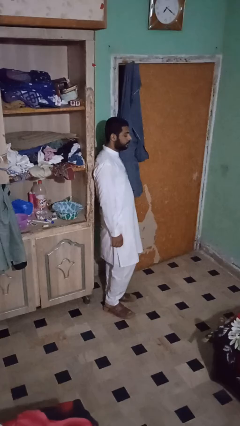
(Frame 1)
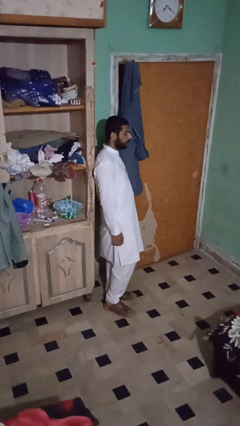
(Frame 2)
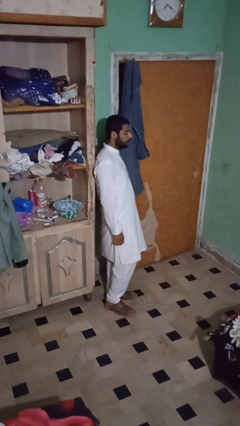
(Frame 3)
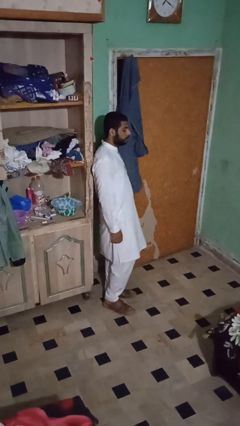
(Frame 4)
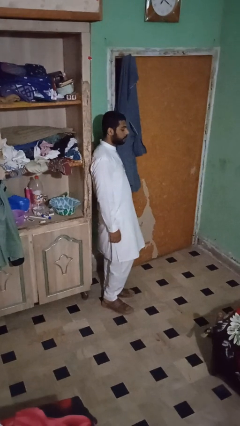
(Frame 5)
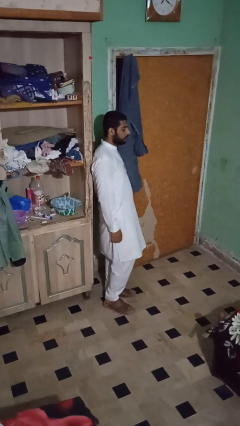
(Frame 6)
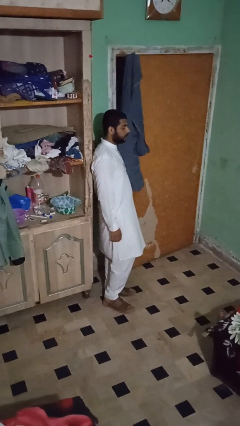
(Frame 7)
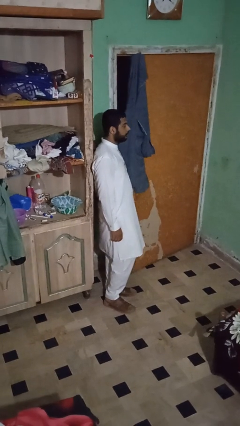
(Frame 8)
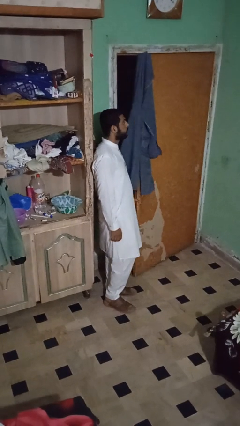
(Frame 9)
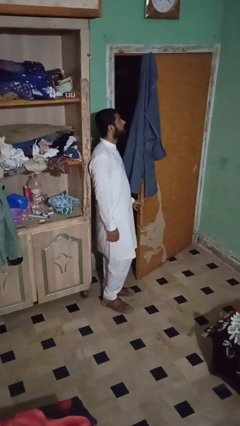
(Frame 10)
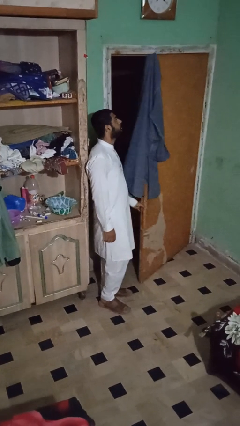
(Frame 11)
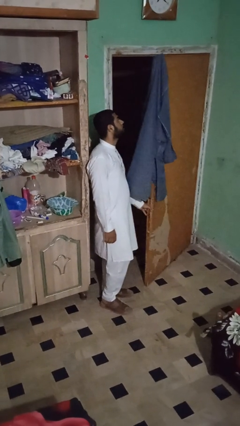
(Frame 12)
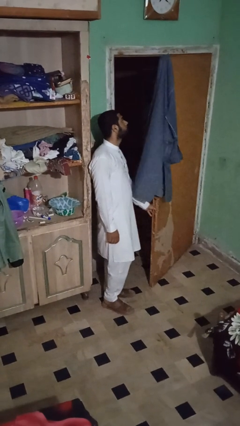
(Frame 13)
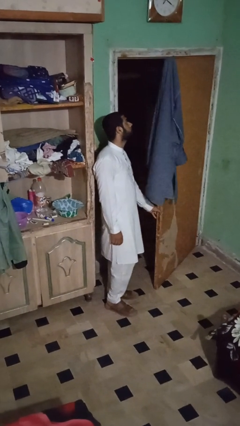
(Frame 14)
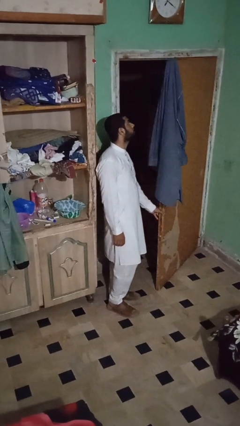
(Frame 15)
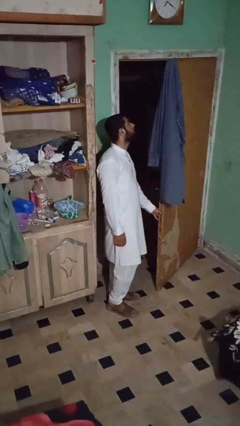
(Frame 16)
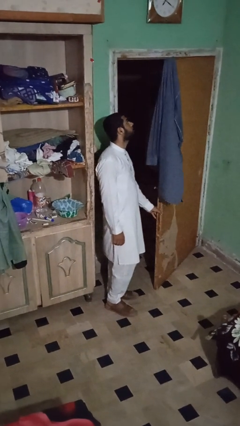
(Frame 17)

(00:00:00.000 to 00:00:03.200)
person opens closet door

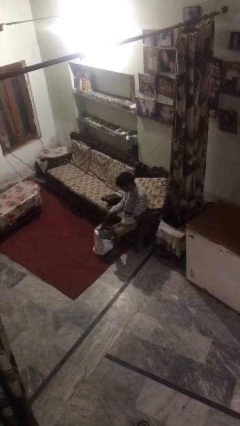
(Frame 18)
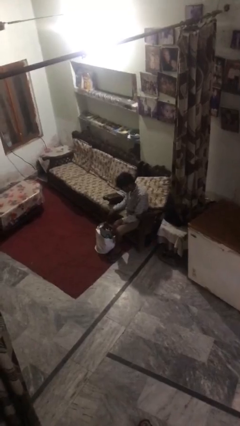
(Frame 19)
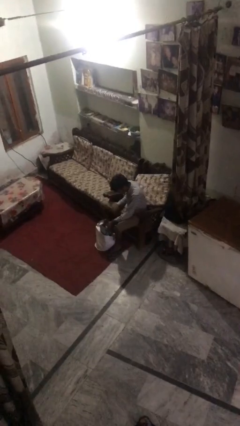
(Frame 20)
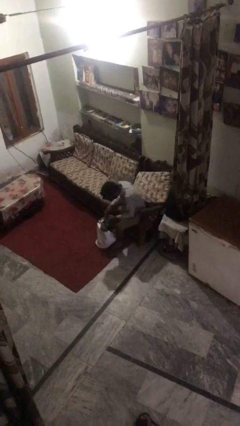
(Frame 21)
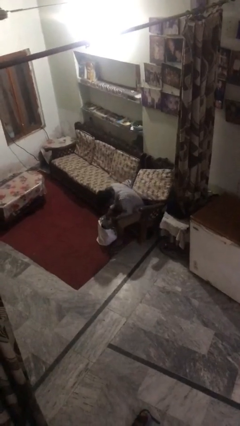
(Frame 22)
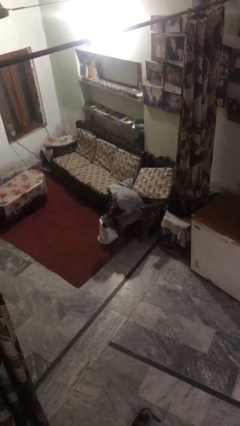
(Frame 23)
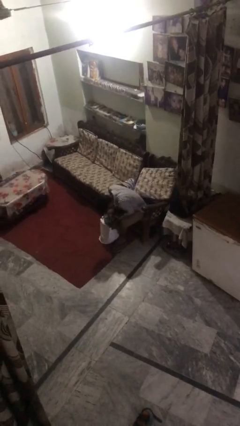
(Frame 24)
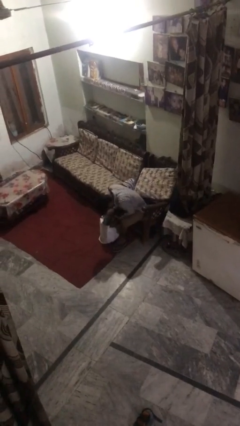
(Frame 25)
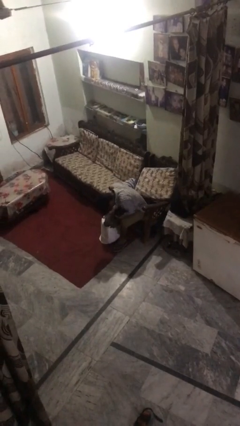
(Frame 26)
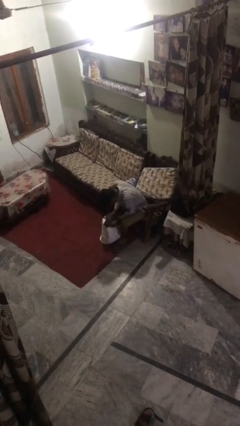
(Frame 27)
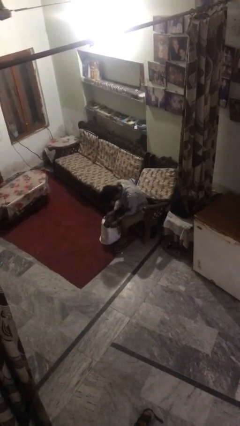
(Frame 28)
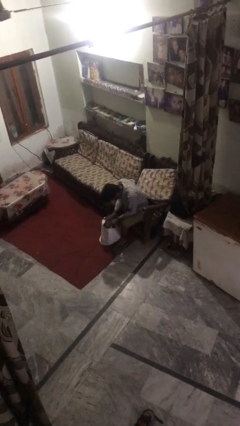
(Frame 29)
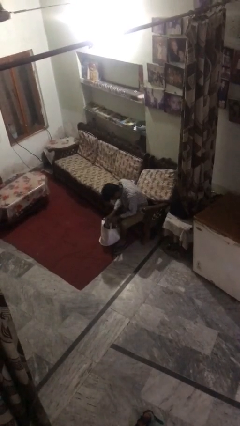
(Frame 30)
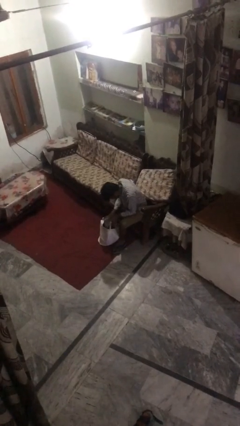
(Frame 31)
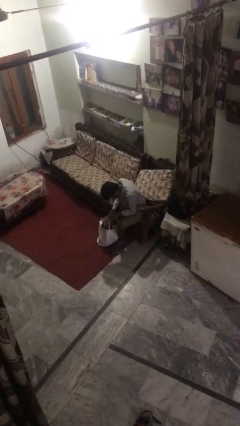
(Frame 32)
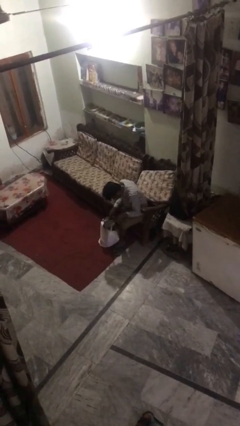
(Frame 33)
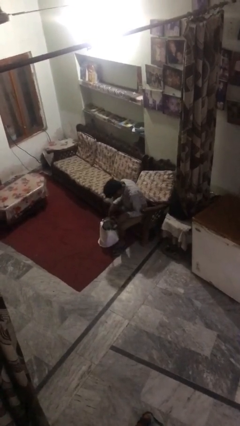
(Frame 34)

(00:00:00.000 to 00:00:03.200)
person searches under bed

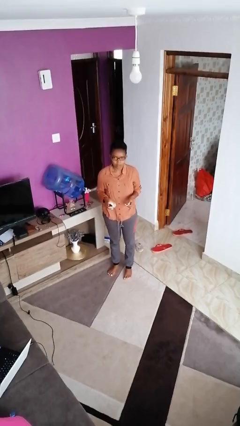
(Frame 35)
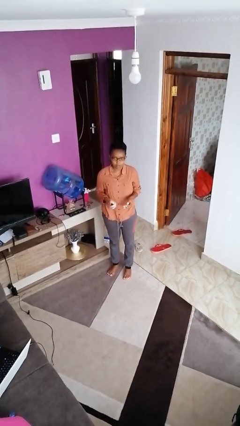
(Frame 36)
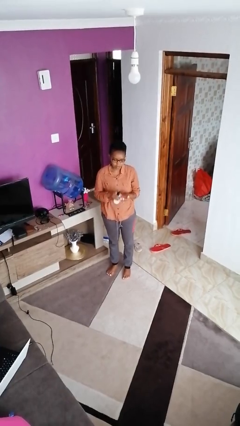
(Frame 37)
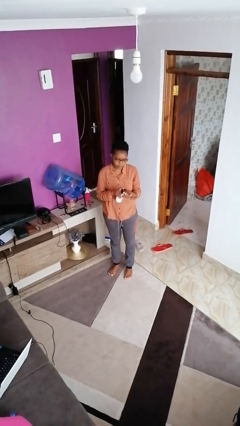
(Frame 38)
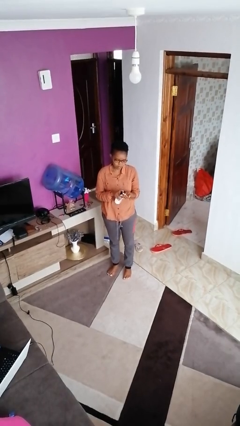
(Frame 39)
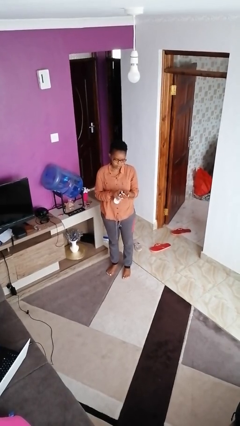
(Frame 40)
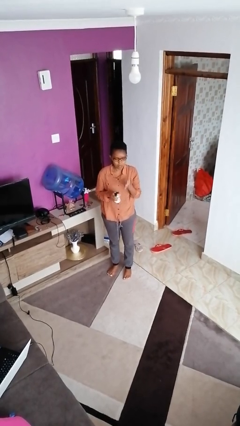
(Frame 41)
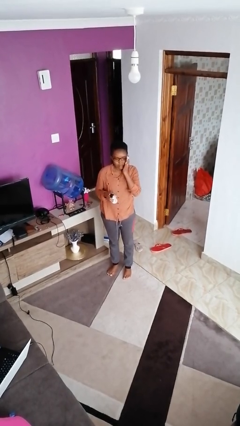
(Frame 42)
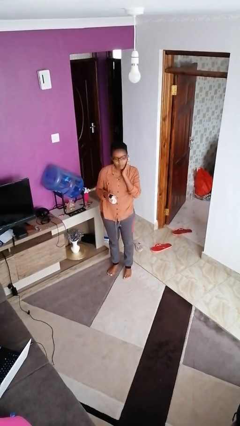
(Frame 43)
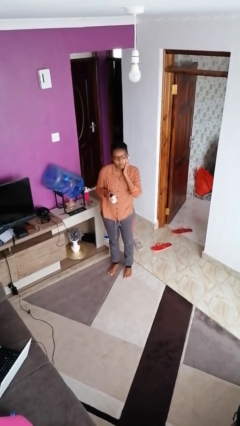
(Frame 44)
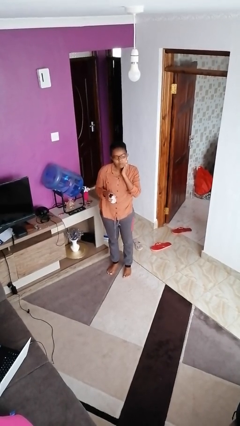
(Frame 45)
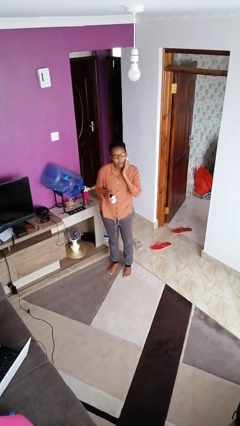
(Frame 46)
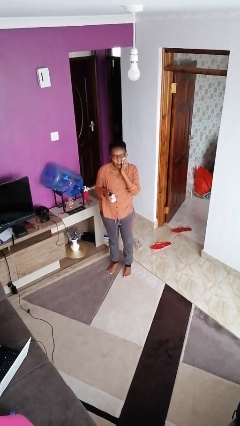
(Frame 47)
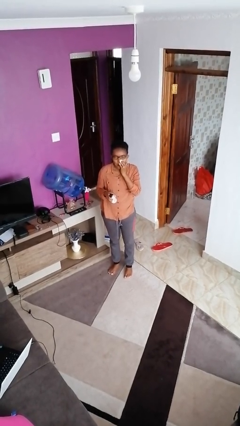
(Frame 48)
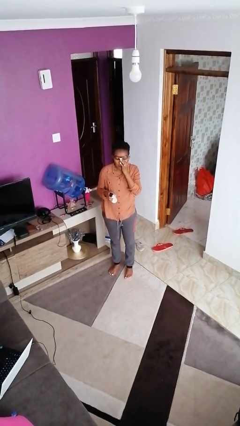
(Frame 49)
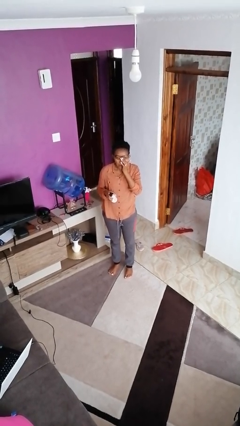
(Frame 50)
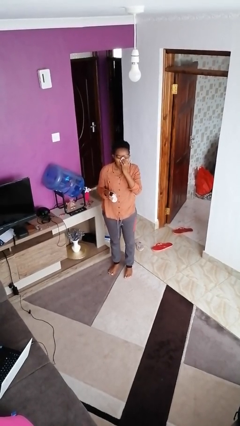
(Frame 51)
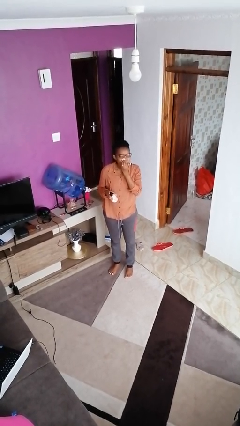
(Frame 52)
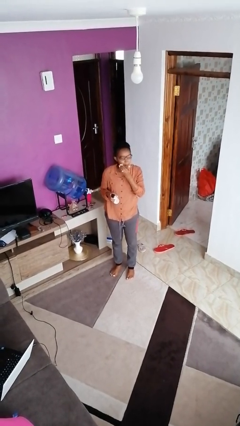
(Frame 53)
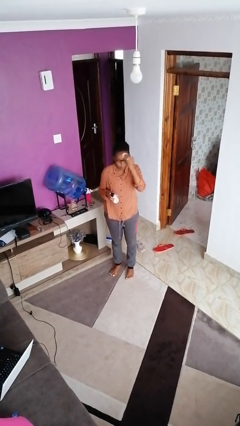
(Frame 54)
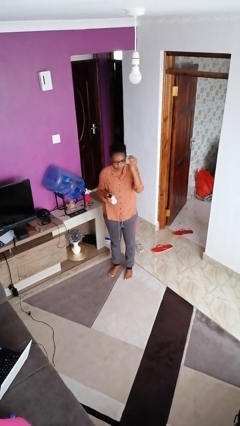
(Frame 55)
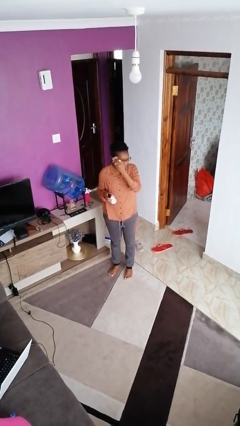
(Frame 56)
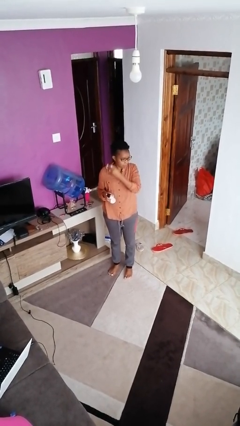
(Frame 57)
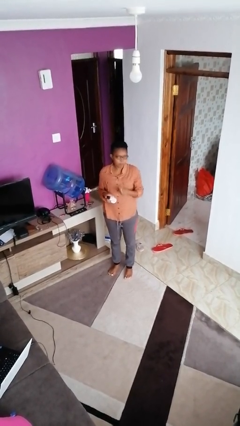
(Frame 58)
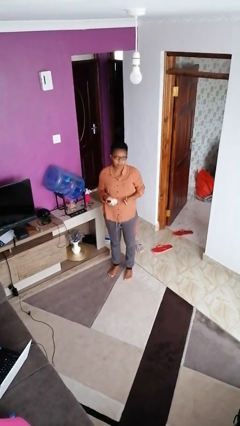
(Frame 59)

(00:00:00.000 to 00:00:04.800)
person applies facial moisturizer

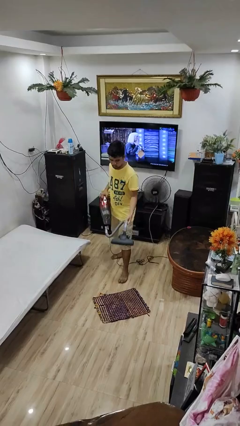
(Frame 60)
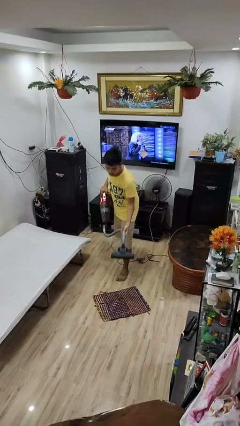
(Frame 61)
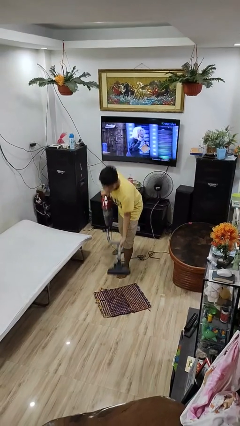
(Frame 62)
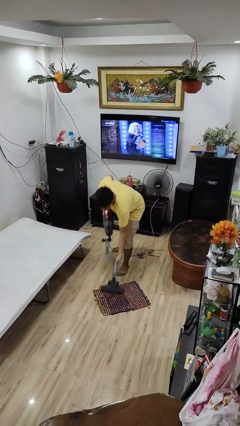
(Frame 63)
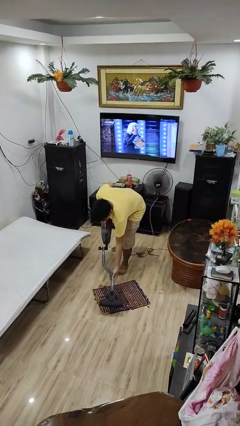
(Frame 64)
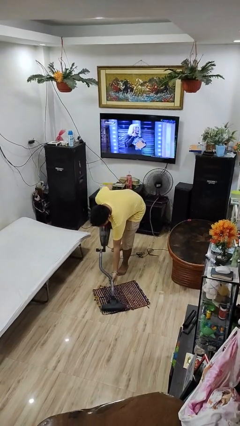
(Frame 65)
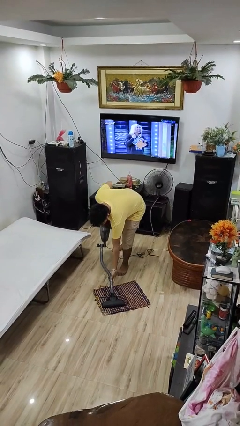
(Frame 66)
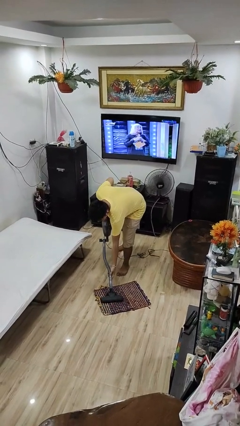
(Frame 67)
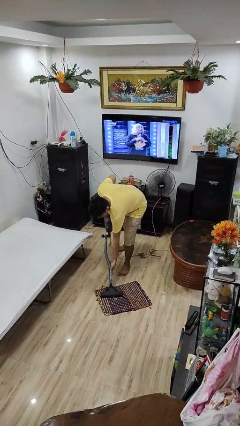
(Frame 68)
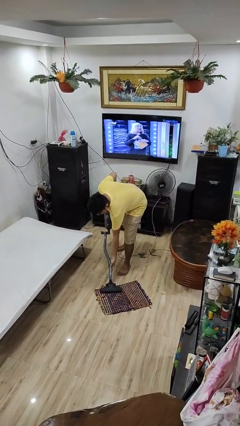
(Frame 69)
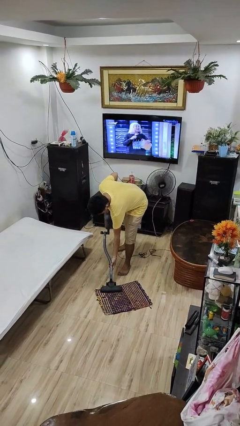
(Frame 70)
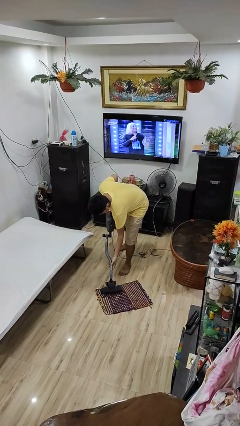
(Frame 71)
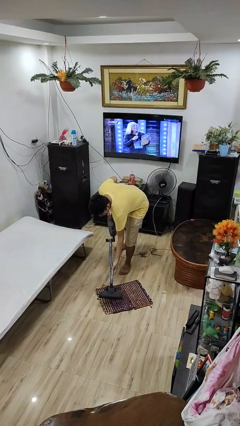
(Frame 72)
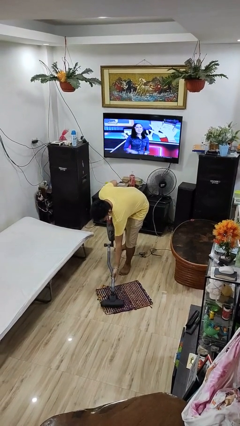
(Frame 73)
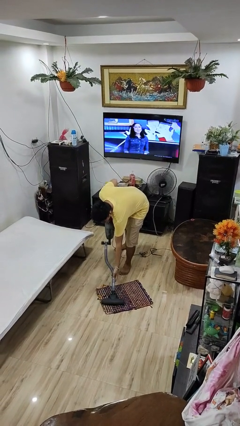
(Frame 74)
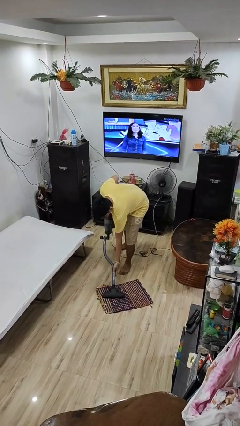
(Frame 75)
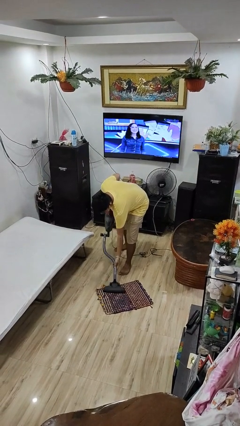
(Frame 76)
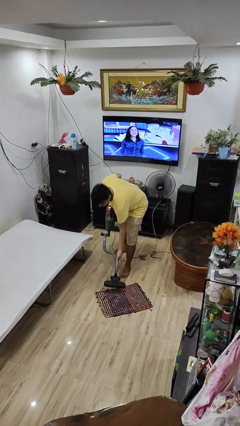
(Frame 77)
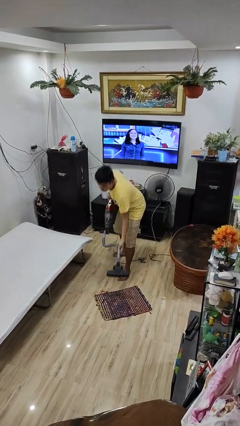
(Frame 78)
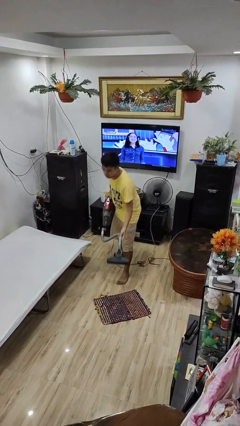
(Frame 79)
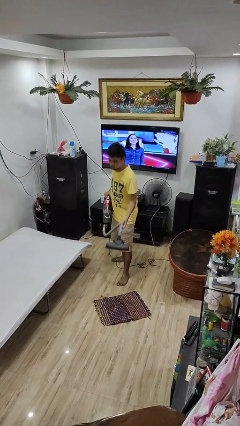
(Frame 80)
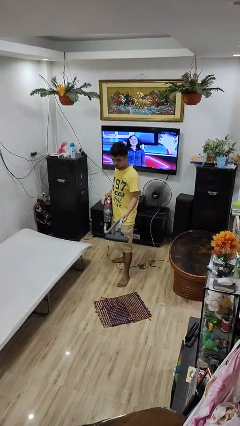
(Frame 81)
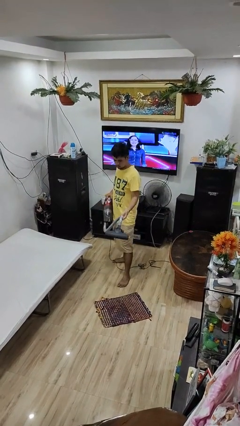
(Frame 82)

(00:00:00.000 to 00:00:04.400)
person vacuums carpet

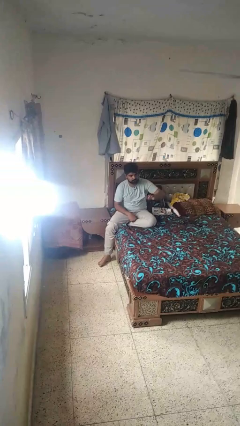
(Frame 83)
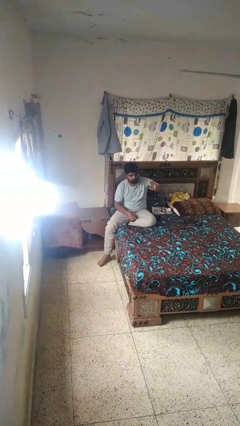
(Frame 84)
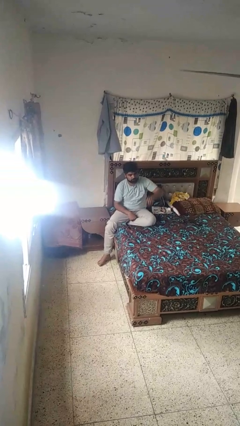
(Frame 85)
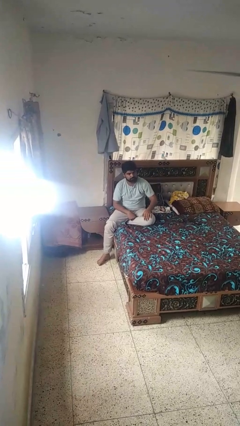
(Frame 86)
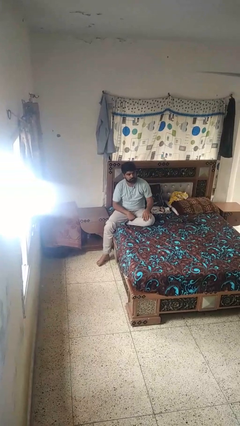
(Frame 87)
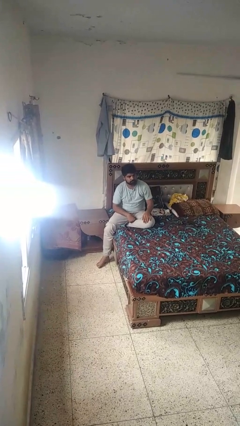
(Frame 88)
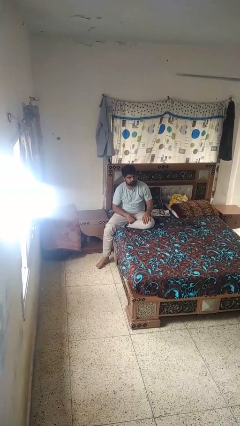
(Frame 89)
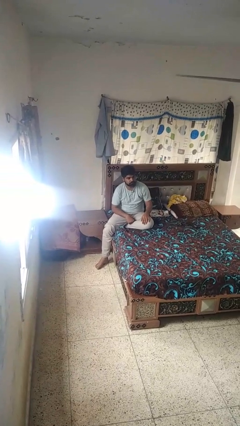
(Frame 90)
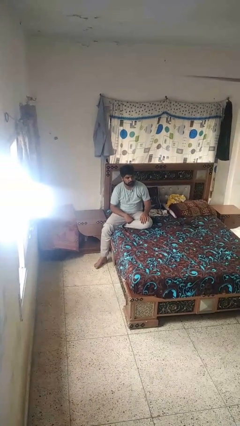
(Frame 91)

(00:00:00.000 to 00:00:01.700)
person gestures lower hand
